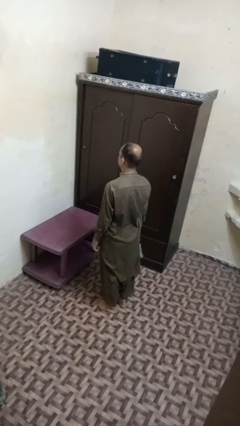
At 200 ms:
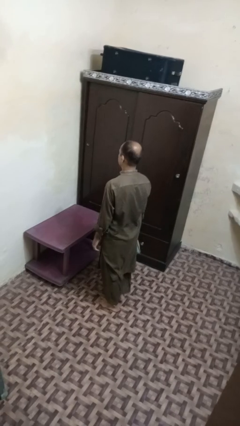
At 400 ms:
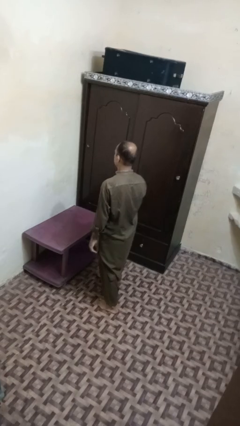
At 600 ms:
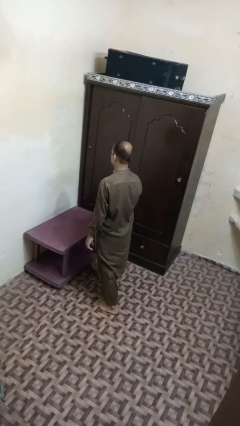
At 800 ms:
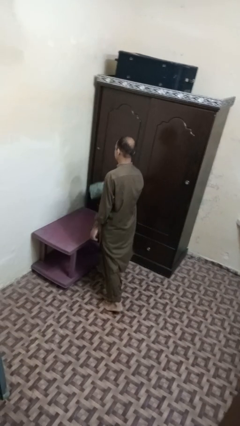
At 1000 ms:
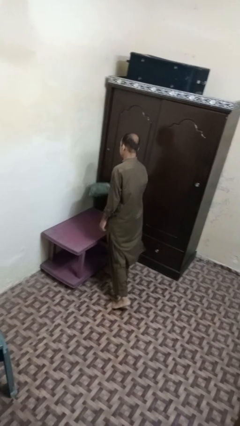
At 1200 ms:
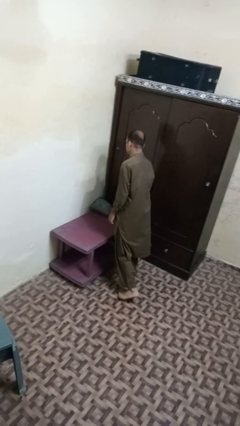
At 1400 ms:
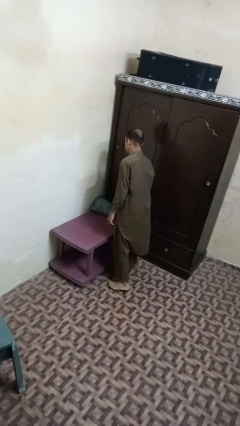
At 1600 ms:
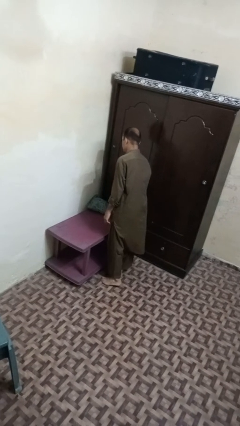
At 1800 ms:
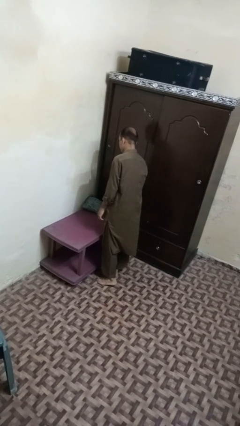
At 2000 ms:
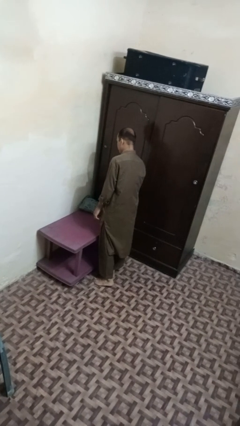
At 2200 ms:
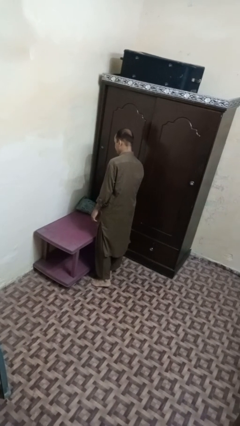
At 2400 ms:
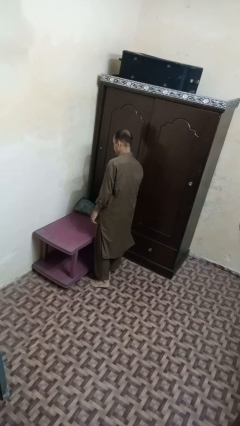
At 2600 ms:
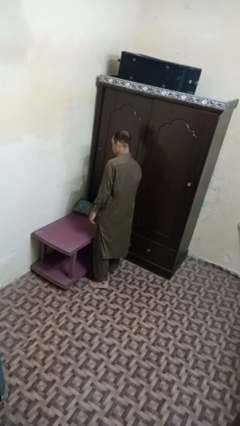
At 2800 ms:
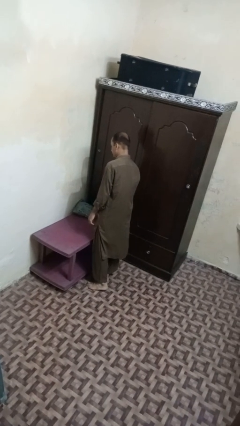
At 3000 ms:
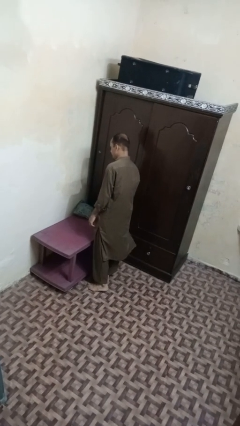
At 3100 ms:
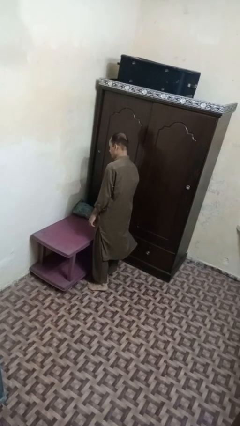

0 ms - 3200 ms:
person throws object on table

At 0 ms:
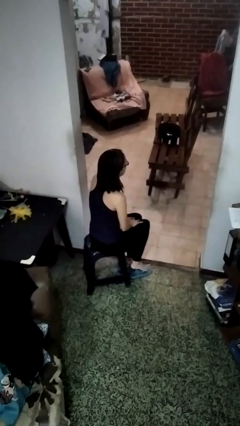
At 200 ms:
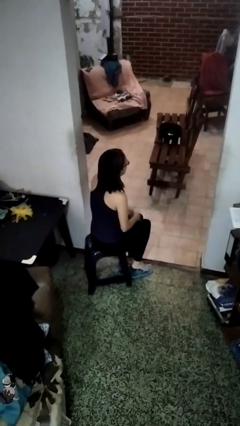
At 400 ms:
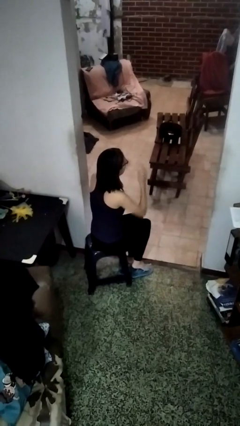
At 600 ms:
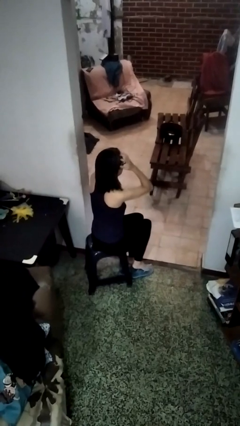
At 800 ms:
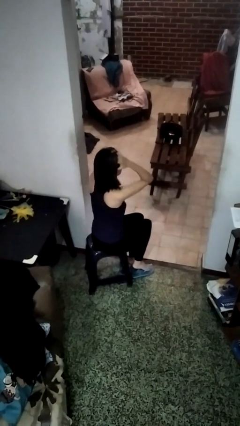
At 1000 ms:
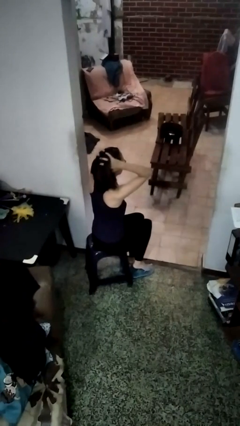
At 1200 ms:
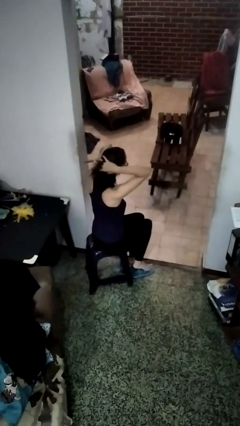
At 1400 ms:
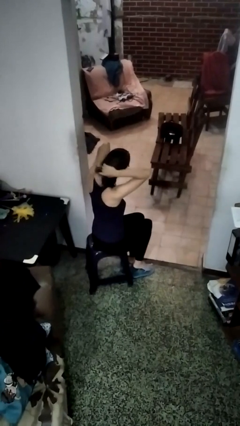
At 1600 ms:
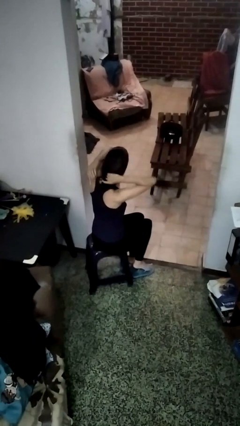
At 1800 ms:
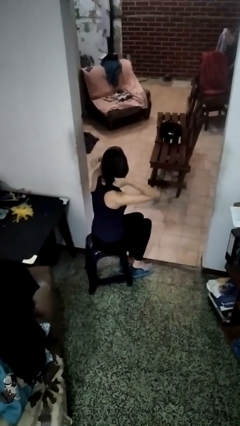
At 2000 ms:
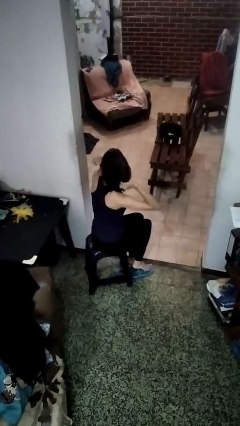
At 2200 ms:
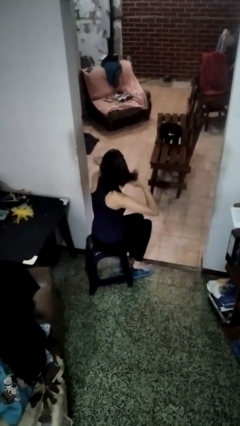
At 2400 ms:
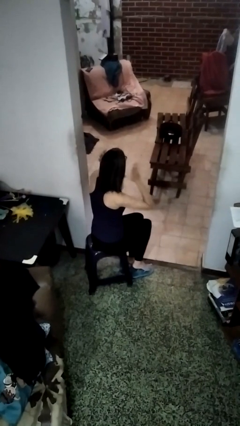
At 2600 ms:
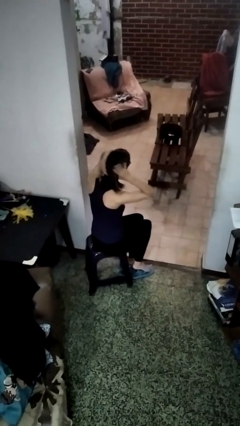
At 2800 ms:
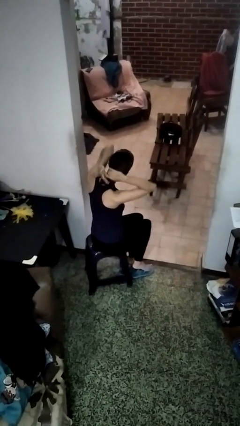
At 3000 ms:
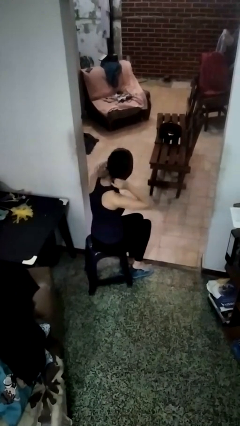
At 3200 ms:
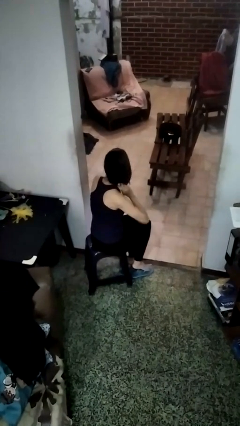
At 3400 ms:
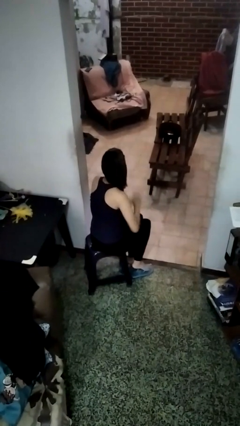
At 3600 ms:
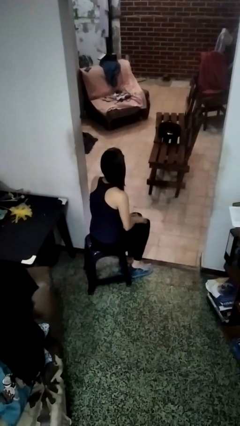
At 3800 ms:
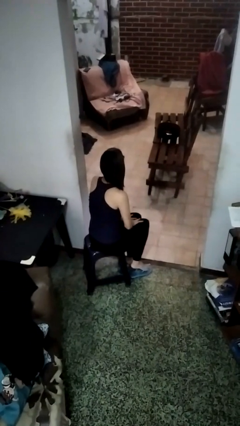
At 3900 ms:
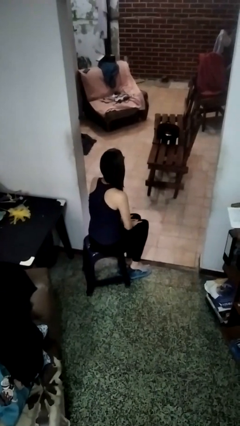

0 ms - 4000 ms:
person strokes hair

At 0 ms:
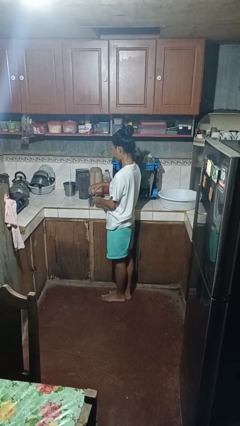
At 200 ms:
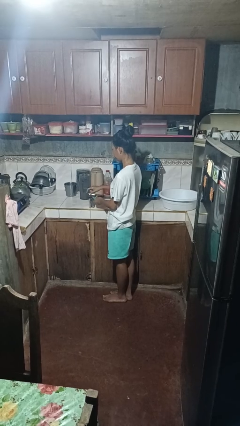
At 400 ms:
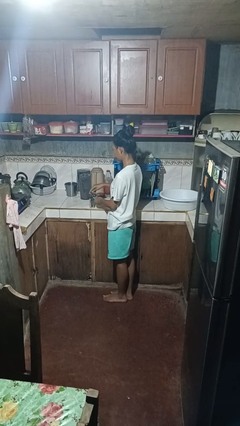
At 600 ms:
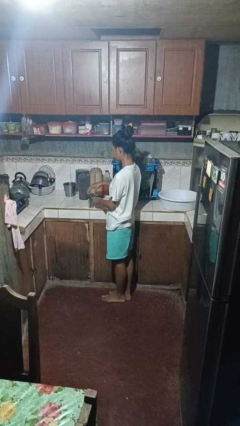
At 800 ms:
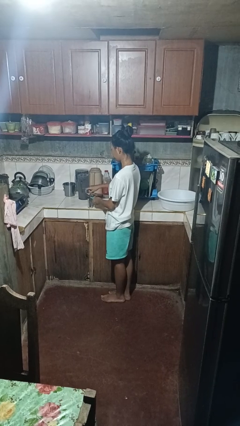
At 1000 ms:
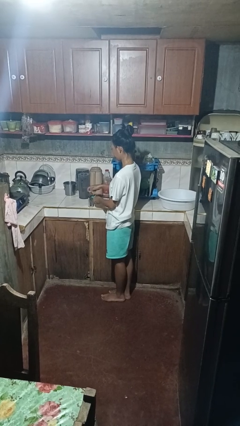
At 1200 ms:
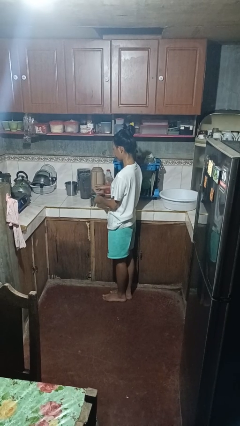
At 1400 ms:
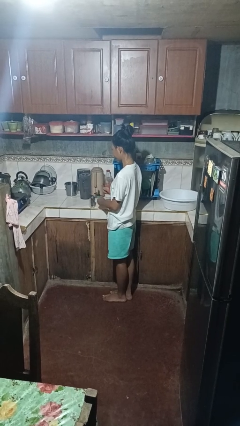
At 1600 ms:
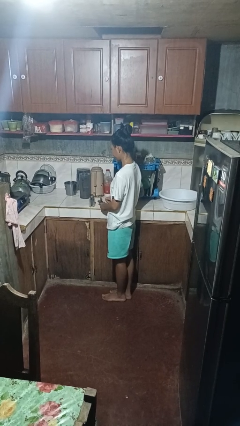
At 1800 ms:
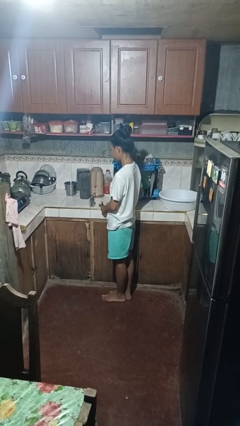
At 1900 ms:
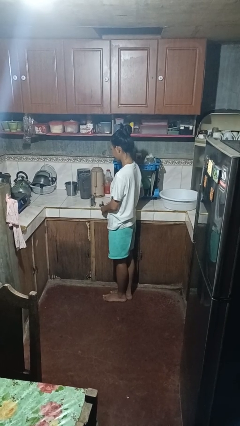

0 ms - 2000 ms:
person opens can with can opener

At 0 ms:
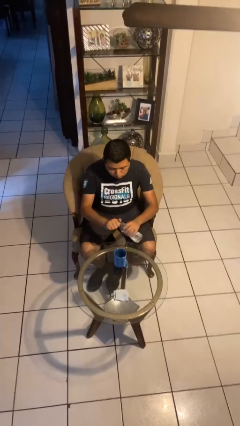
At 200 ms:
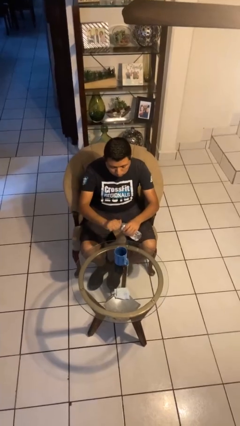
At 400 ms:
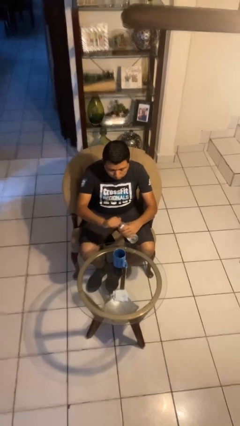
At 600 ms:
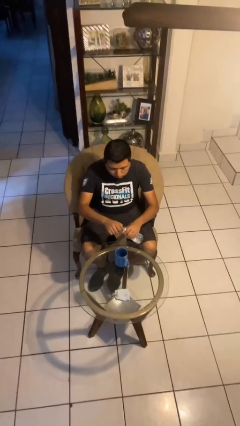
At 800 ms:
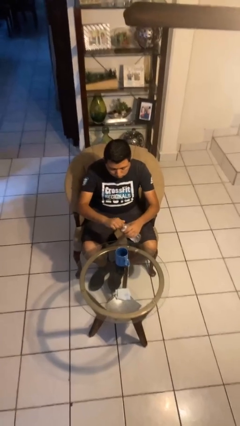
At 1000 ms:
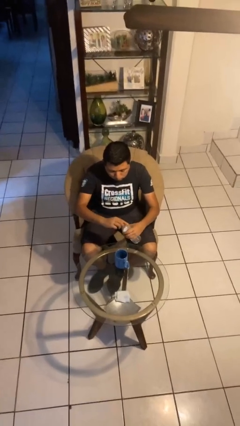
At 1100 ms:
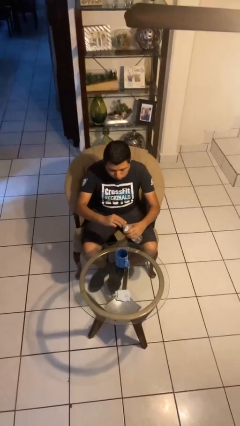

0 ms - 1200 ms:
person unscrews lid from bottle

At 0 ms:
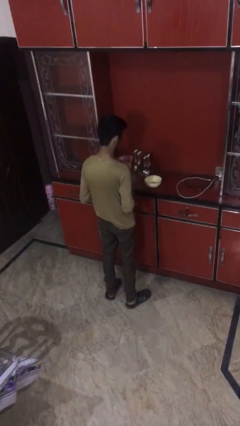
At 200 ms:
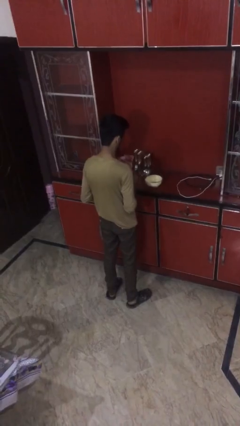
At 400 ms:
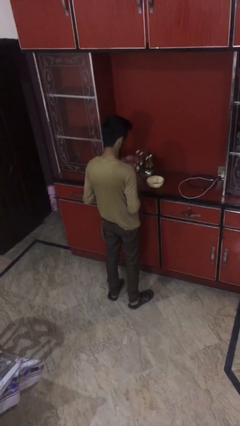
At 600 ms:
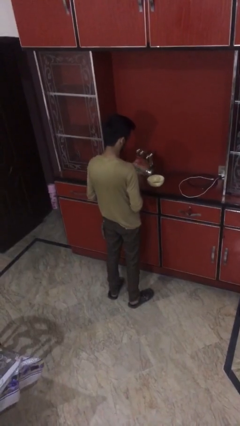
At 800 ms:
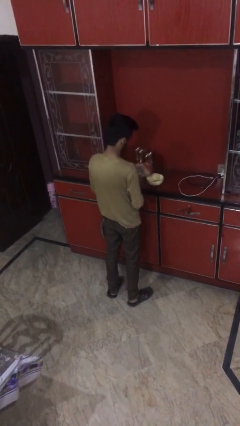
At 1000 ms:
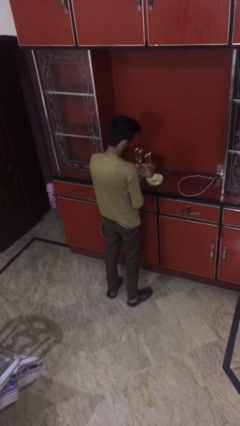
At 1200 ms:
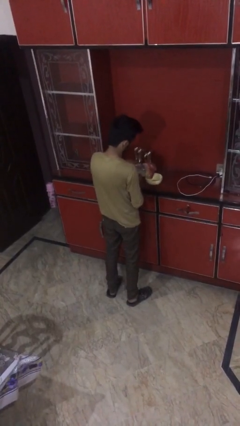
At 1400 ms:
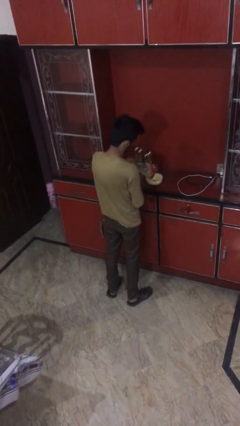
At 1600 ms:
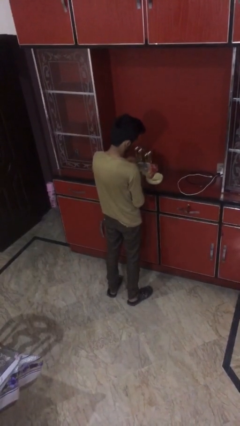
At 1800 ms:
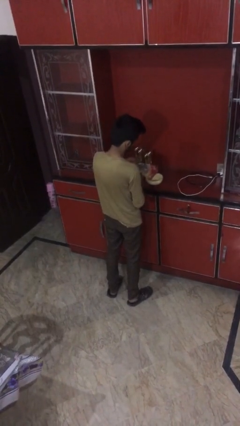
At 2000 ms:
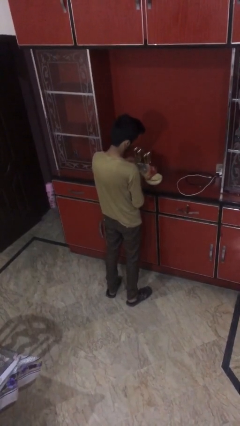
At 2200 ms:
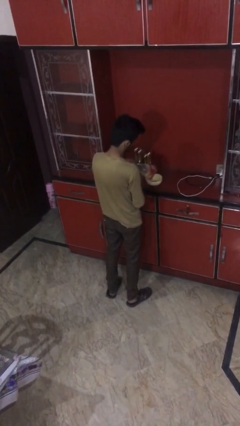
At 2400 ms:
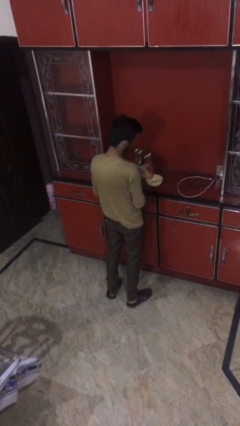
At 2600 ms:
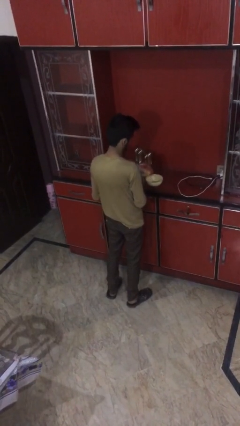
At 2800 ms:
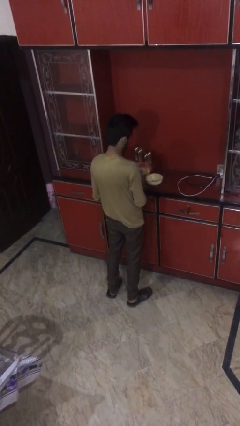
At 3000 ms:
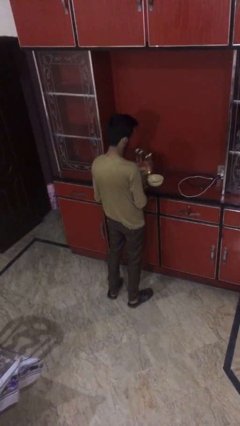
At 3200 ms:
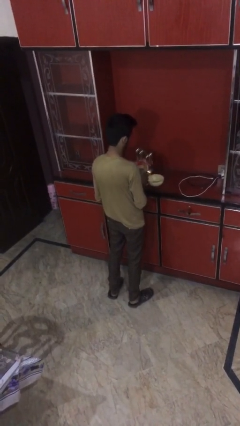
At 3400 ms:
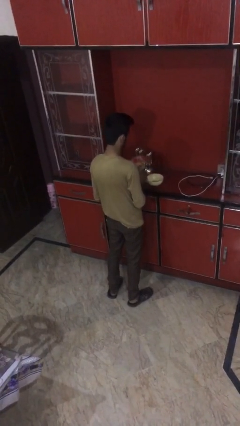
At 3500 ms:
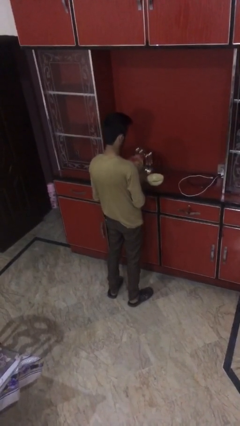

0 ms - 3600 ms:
person pours into bowl

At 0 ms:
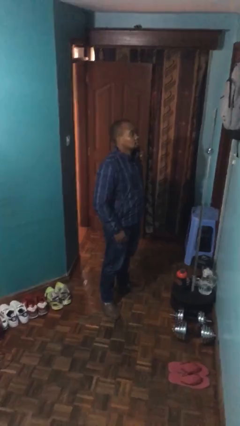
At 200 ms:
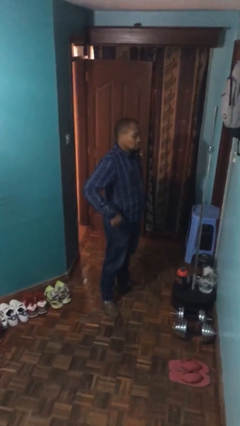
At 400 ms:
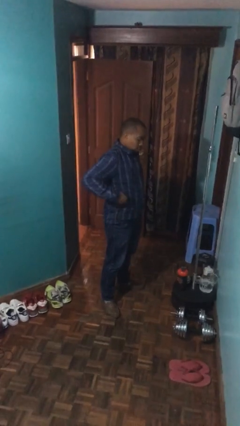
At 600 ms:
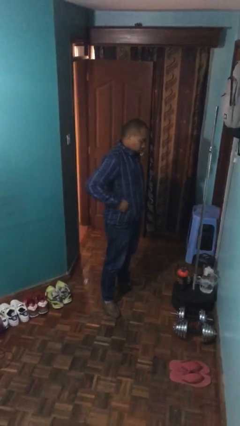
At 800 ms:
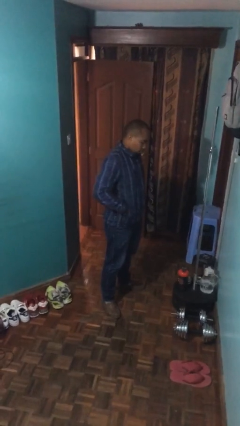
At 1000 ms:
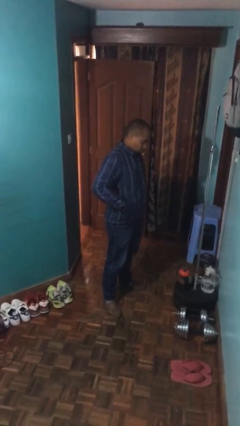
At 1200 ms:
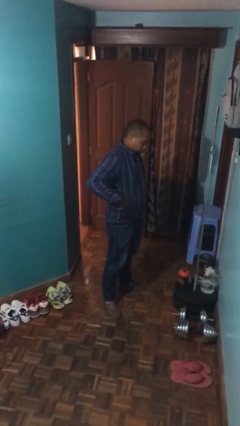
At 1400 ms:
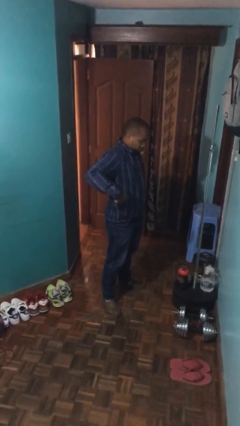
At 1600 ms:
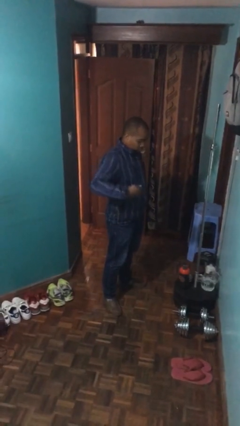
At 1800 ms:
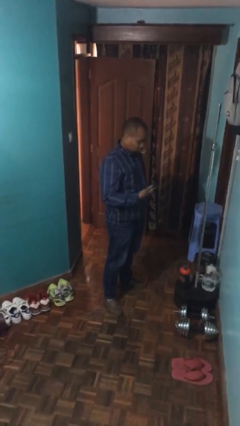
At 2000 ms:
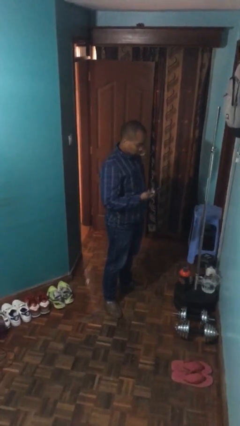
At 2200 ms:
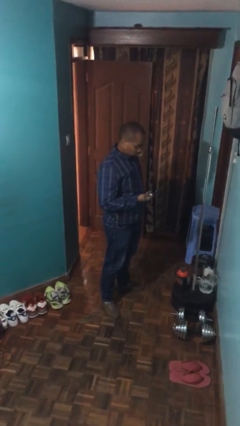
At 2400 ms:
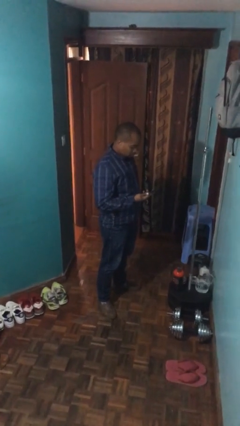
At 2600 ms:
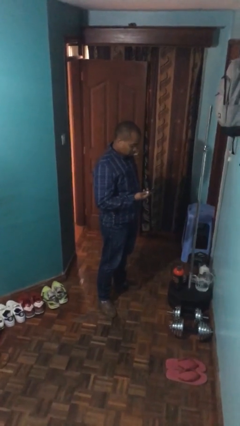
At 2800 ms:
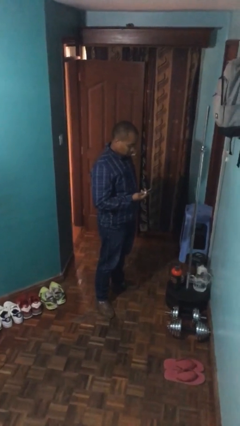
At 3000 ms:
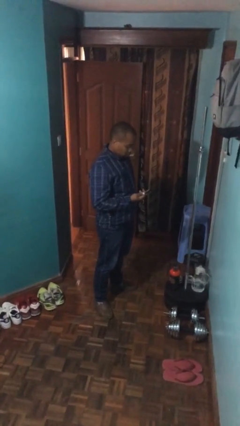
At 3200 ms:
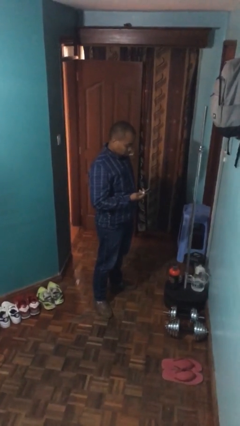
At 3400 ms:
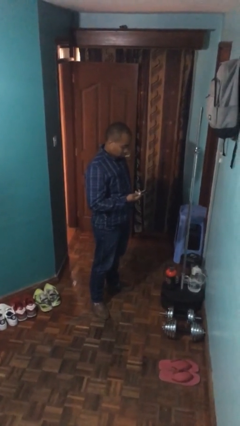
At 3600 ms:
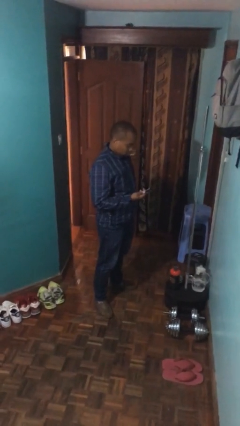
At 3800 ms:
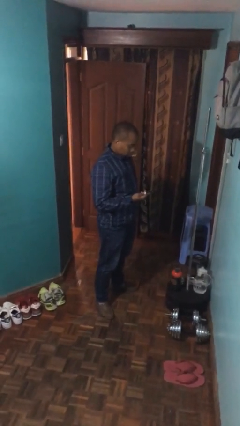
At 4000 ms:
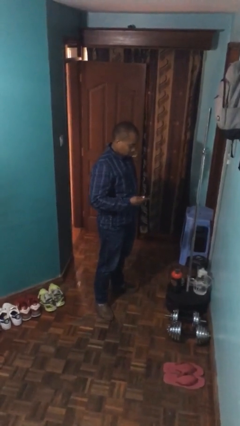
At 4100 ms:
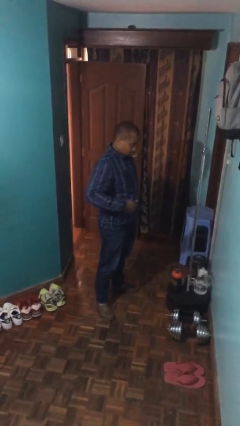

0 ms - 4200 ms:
person takes phone from pocket
